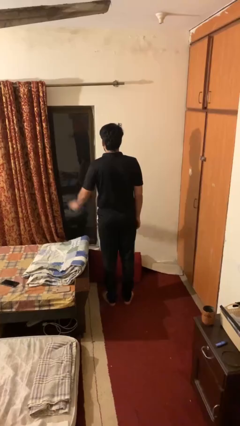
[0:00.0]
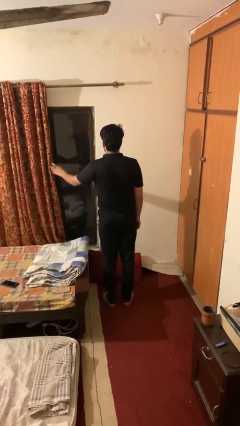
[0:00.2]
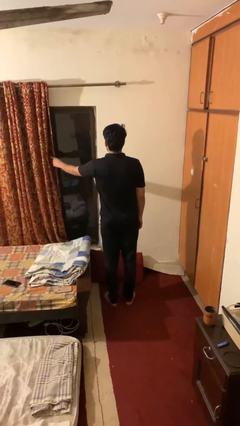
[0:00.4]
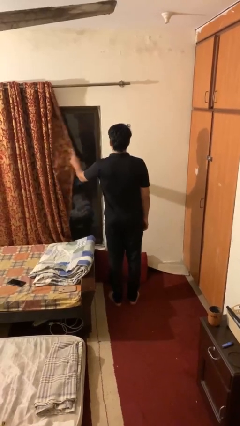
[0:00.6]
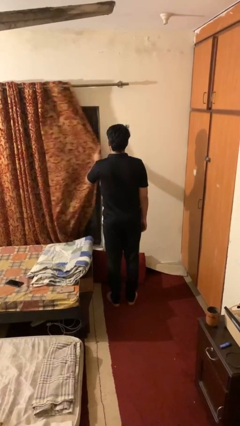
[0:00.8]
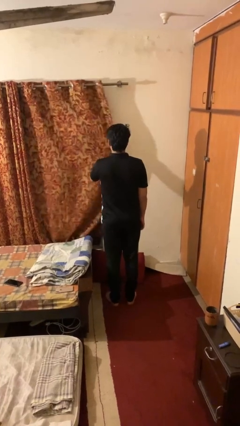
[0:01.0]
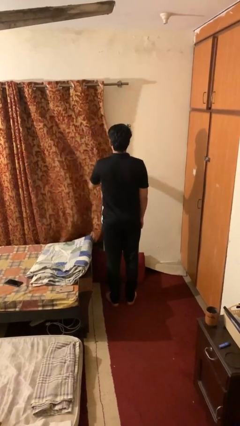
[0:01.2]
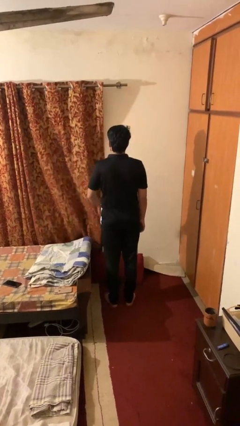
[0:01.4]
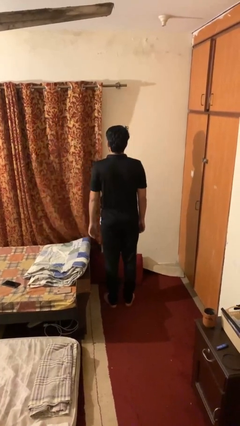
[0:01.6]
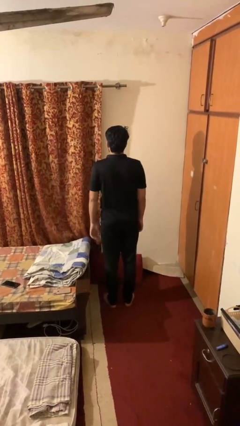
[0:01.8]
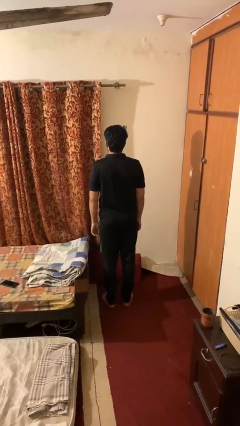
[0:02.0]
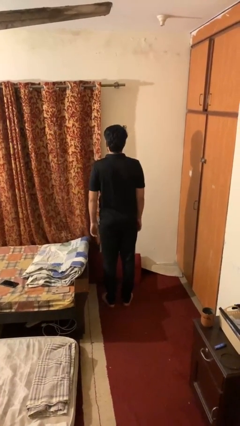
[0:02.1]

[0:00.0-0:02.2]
person closes curtains

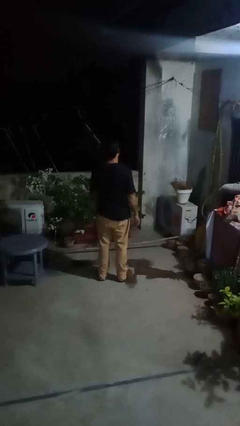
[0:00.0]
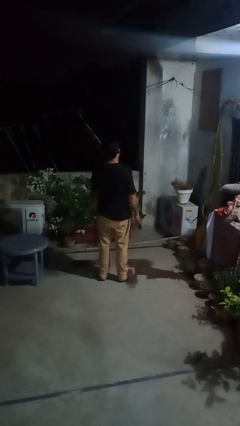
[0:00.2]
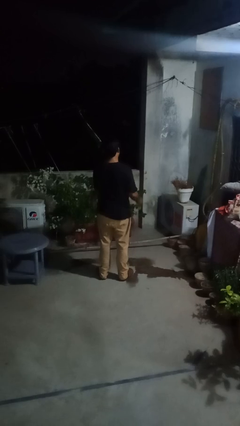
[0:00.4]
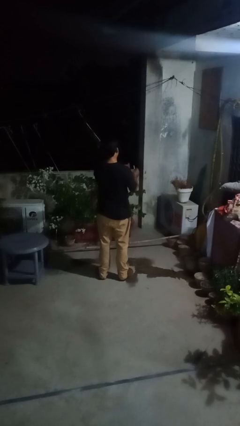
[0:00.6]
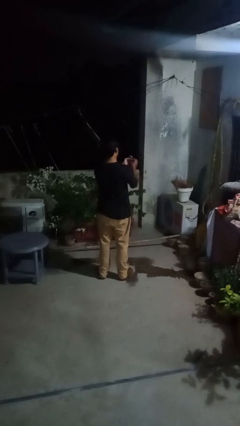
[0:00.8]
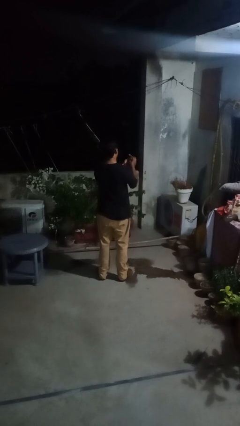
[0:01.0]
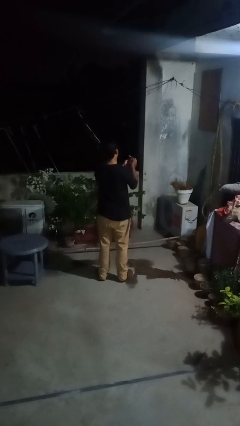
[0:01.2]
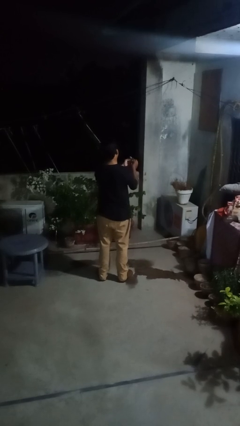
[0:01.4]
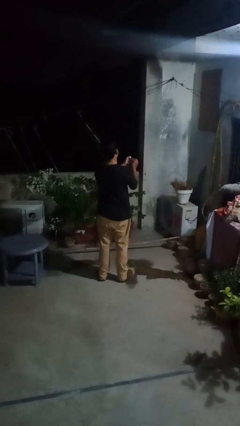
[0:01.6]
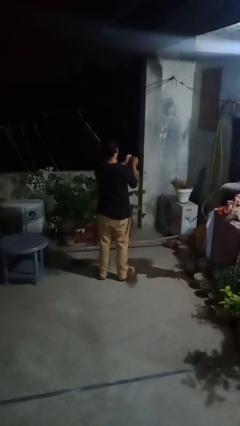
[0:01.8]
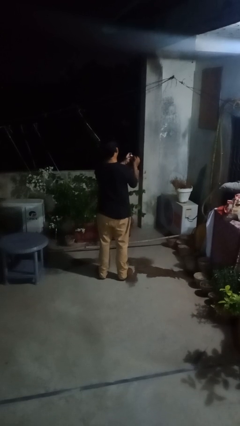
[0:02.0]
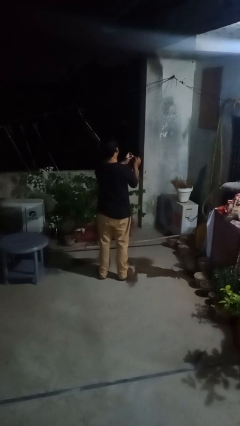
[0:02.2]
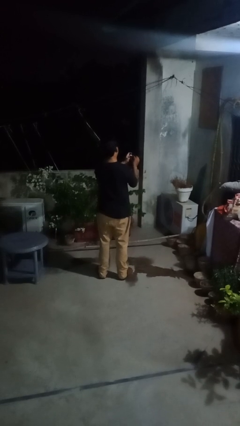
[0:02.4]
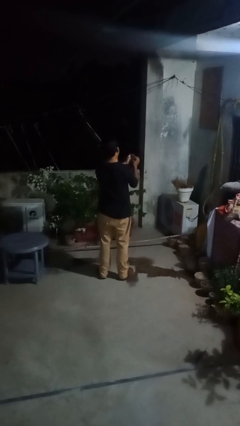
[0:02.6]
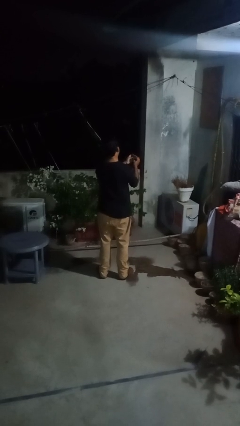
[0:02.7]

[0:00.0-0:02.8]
person files fingernails

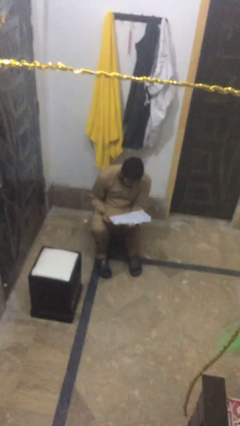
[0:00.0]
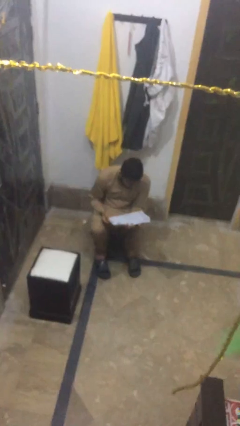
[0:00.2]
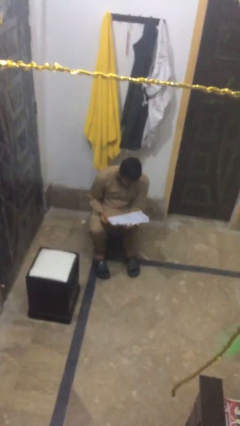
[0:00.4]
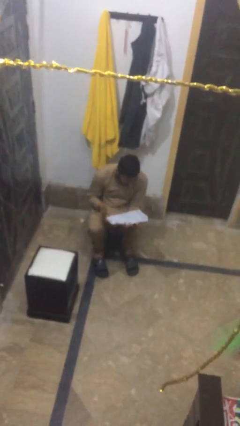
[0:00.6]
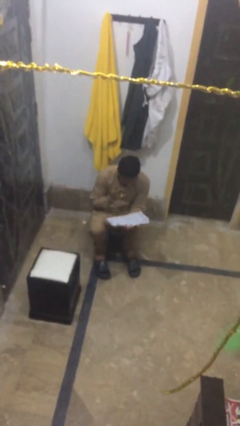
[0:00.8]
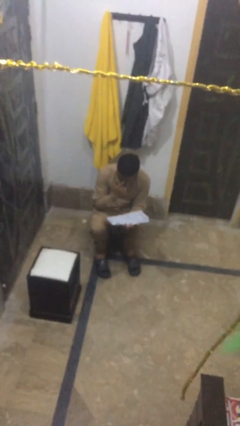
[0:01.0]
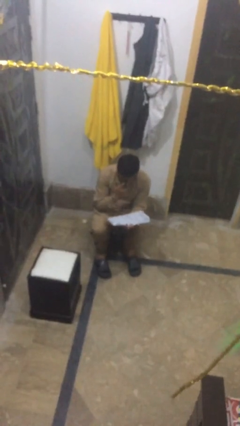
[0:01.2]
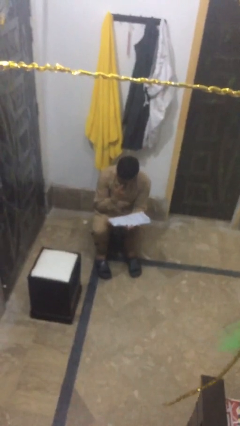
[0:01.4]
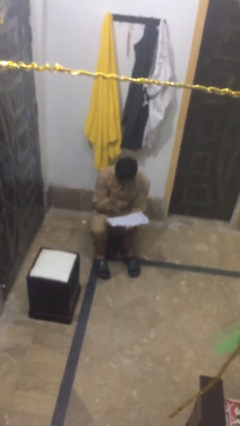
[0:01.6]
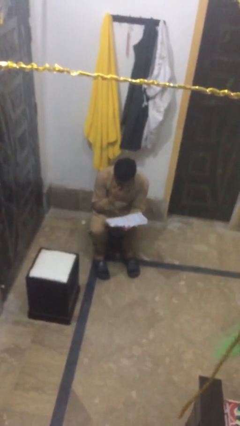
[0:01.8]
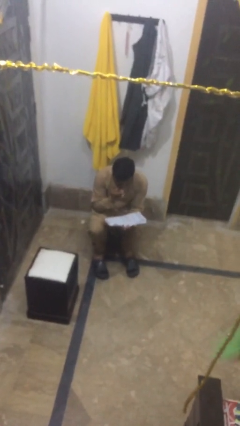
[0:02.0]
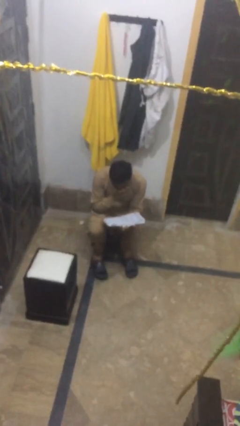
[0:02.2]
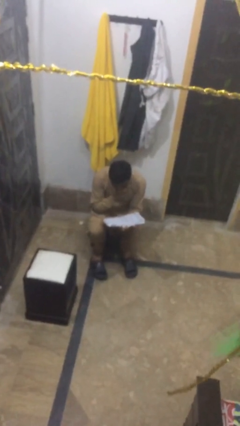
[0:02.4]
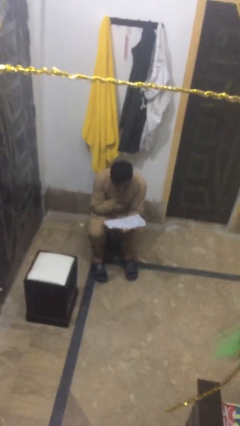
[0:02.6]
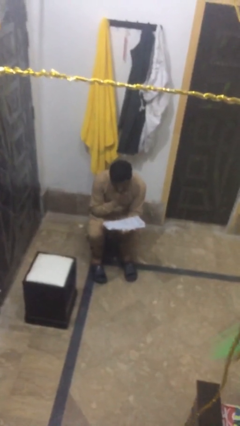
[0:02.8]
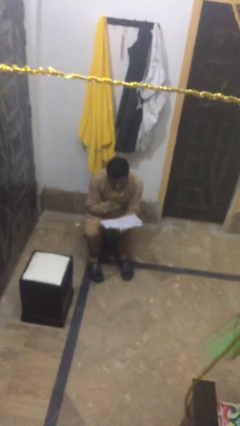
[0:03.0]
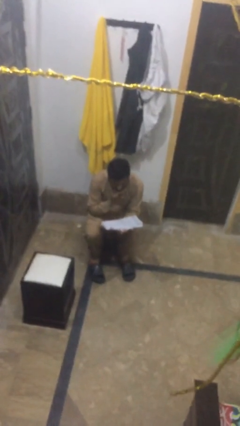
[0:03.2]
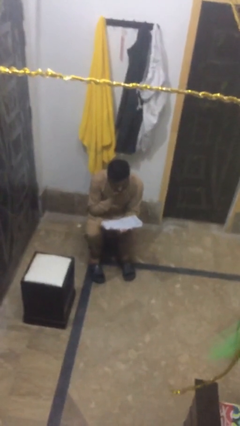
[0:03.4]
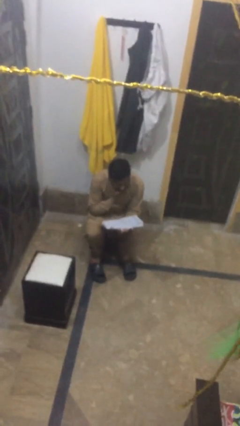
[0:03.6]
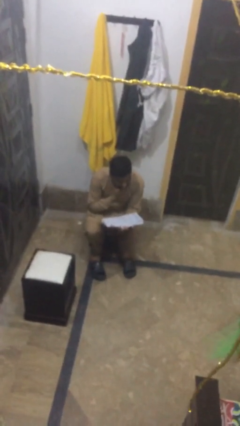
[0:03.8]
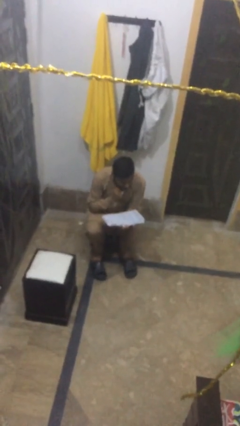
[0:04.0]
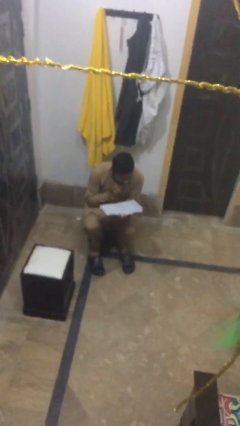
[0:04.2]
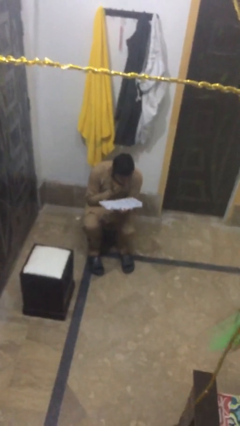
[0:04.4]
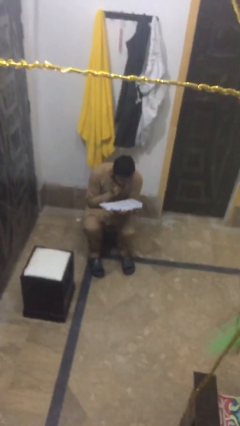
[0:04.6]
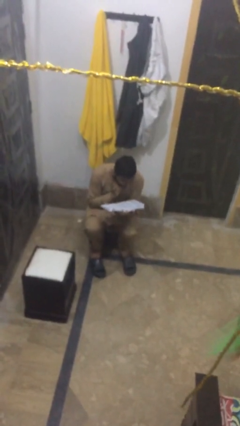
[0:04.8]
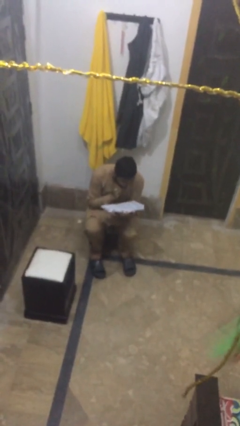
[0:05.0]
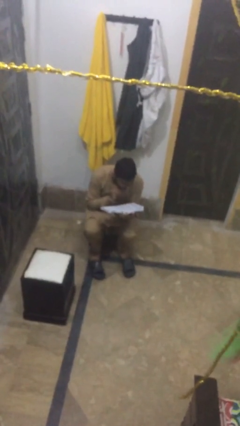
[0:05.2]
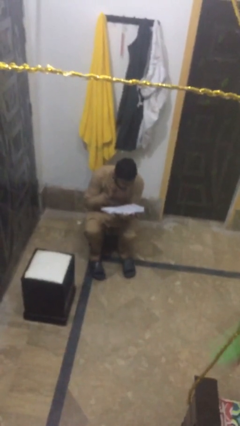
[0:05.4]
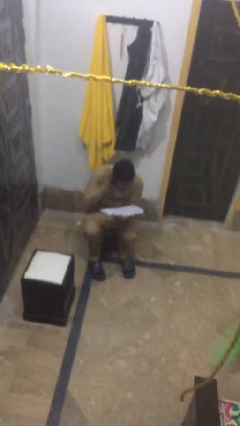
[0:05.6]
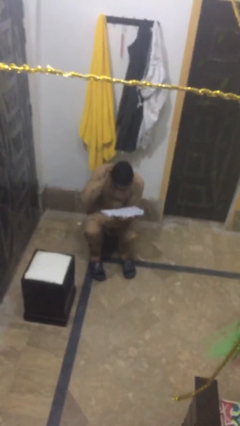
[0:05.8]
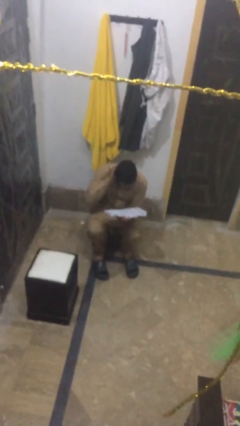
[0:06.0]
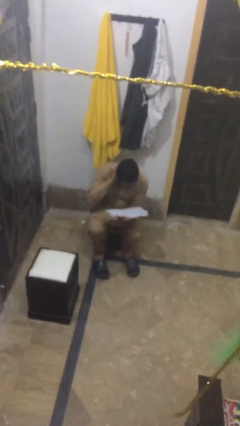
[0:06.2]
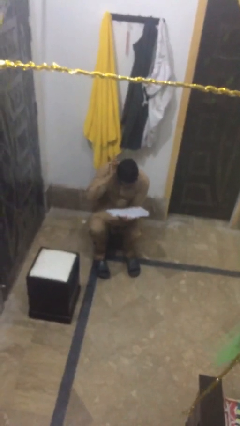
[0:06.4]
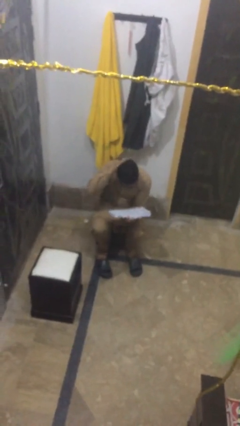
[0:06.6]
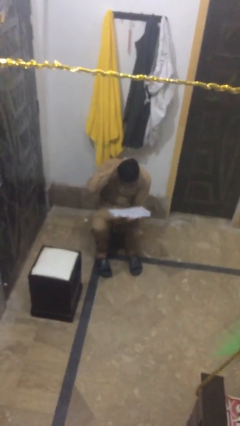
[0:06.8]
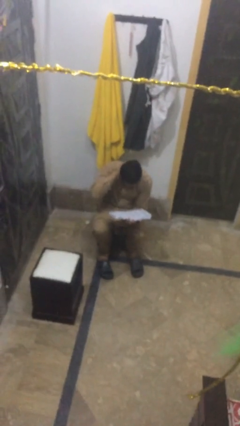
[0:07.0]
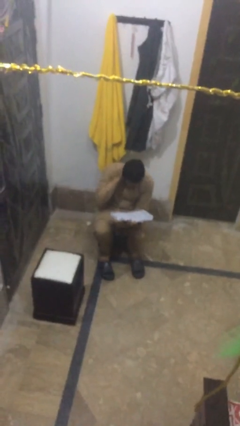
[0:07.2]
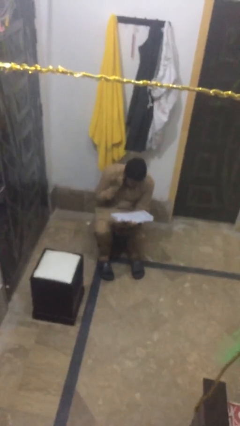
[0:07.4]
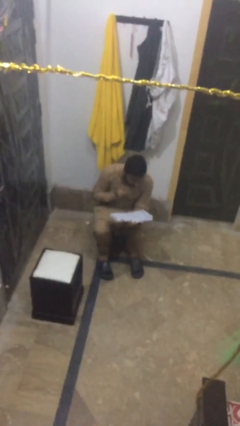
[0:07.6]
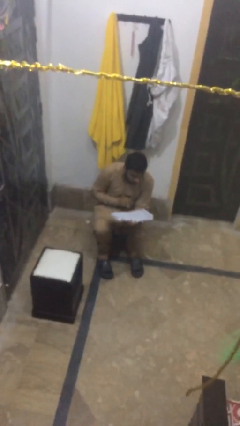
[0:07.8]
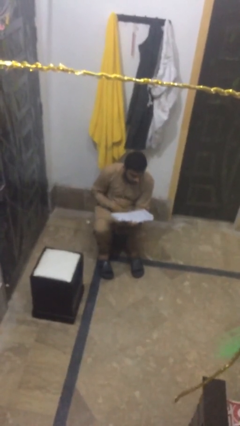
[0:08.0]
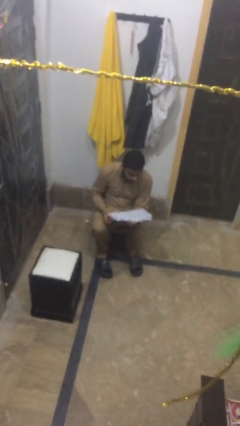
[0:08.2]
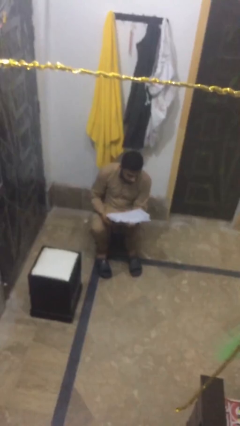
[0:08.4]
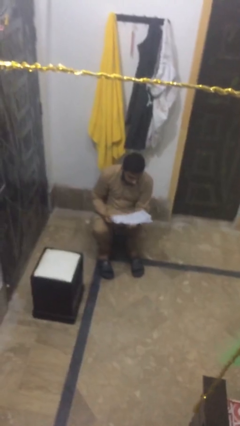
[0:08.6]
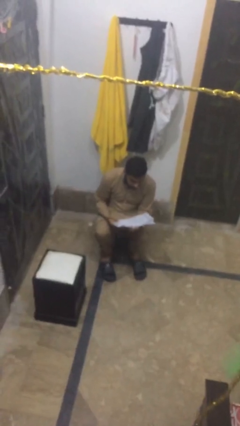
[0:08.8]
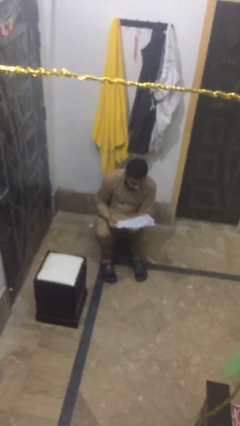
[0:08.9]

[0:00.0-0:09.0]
person reads document

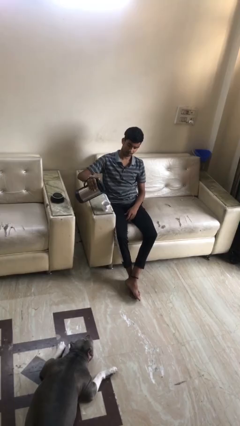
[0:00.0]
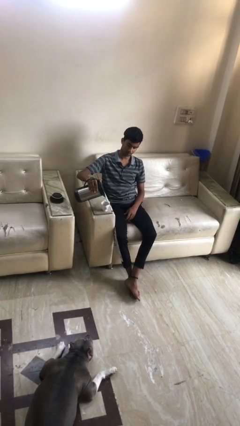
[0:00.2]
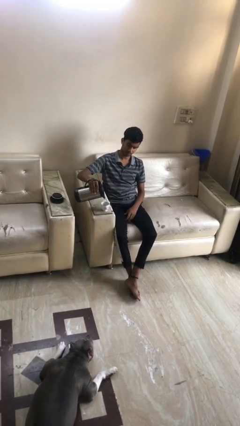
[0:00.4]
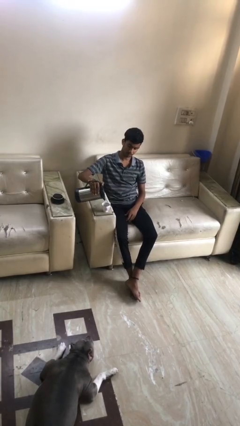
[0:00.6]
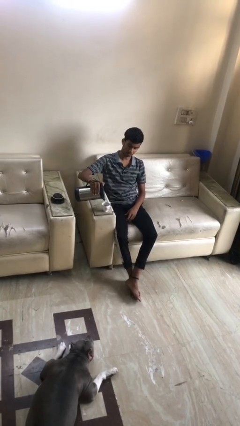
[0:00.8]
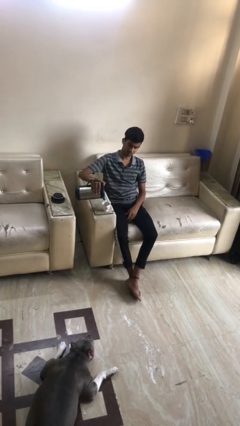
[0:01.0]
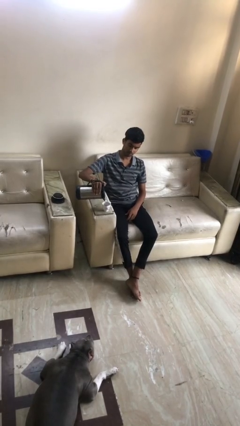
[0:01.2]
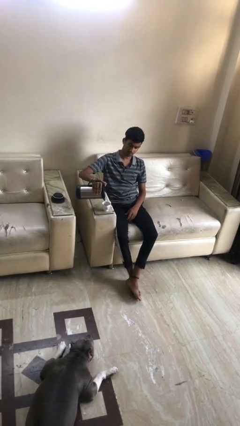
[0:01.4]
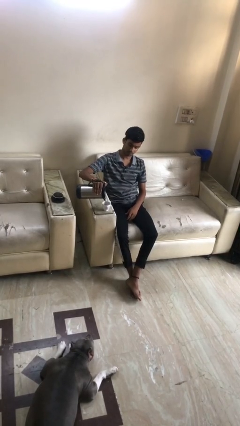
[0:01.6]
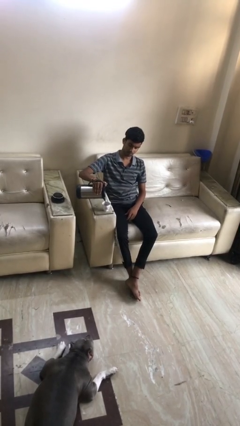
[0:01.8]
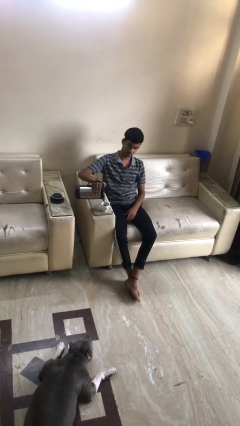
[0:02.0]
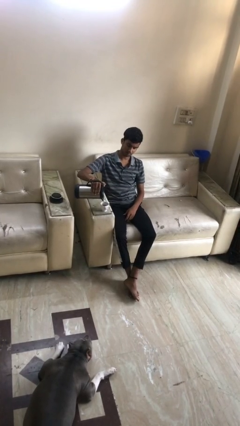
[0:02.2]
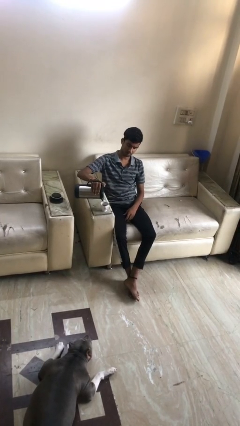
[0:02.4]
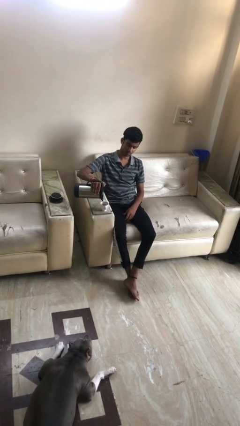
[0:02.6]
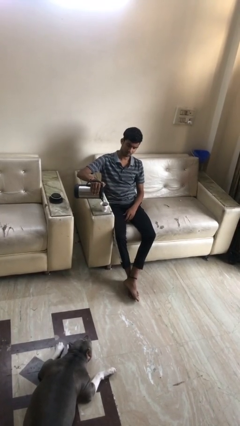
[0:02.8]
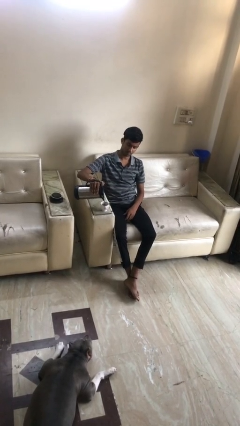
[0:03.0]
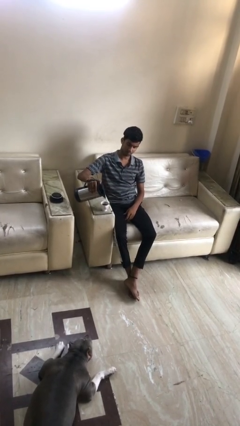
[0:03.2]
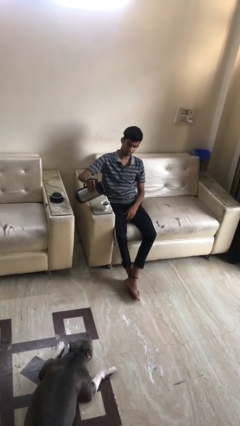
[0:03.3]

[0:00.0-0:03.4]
person pours coffee into mug

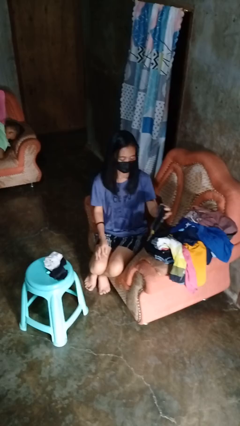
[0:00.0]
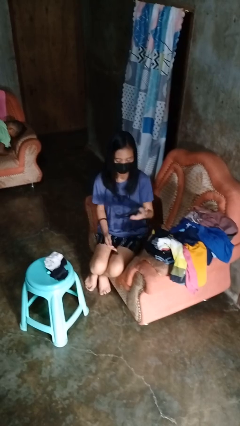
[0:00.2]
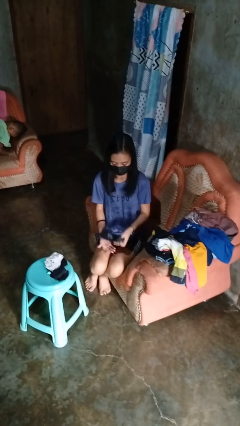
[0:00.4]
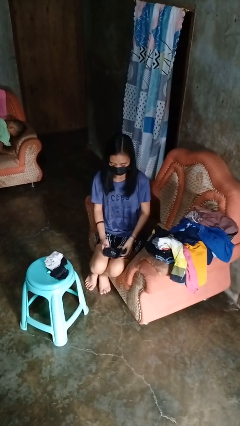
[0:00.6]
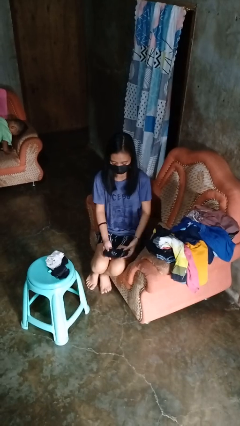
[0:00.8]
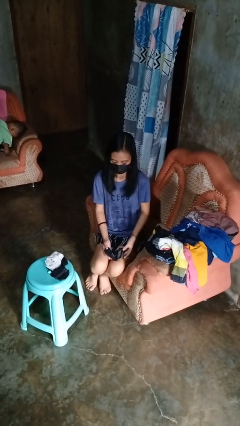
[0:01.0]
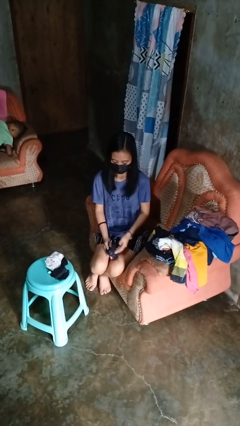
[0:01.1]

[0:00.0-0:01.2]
person folds socks
